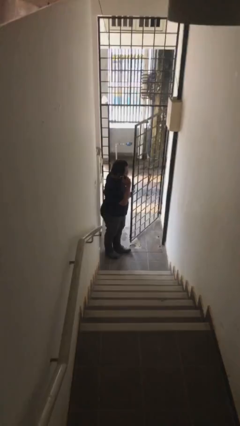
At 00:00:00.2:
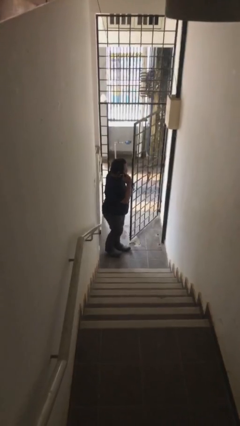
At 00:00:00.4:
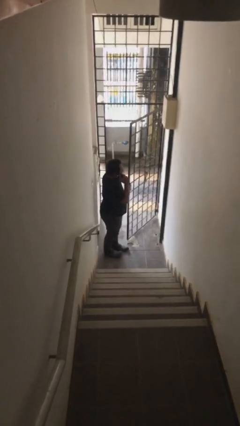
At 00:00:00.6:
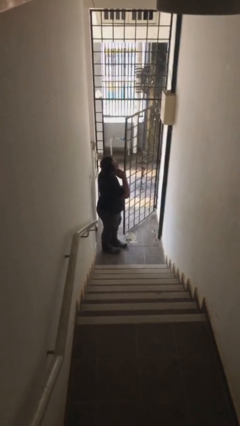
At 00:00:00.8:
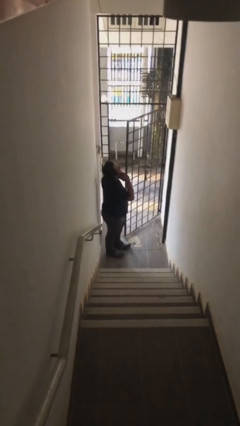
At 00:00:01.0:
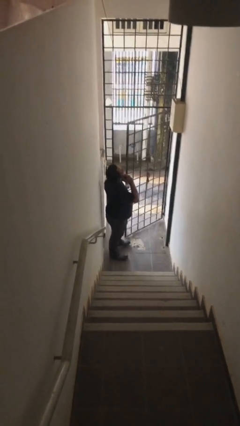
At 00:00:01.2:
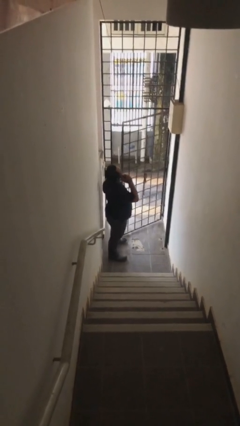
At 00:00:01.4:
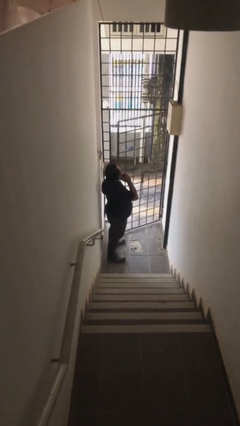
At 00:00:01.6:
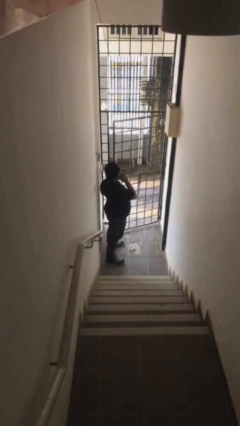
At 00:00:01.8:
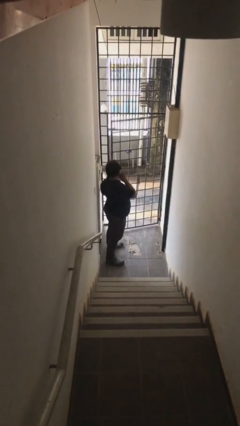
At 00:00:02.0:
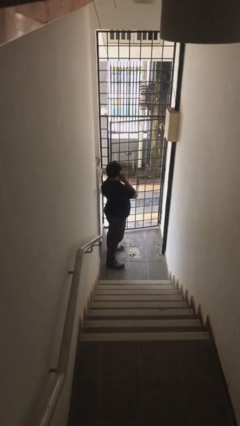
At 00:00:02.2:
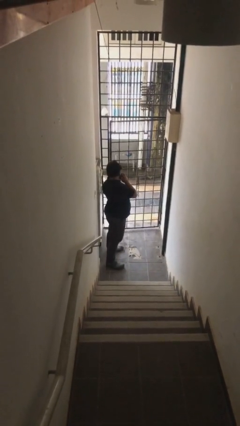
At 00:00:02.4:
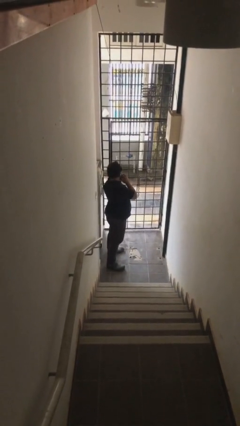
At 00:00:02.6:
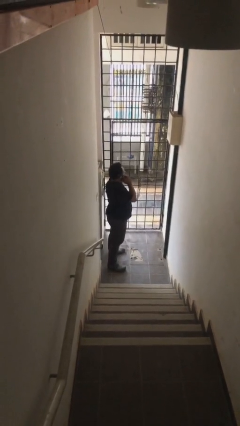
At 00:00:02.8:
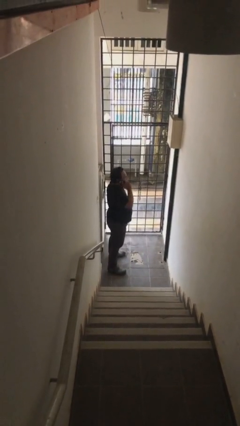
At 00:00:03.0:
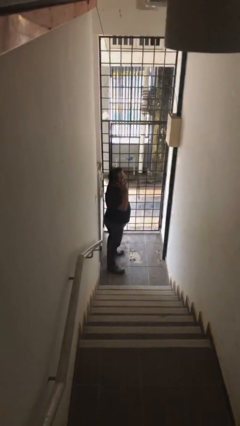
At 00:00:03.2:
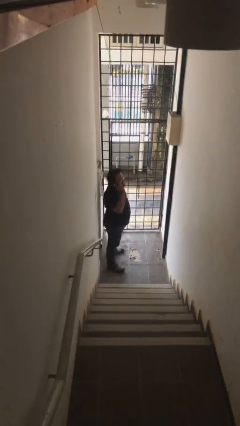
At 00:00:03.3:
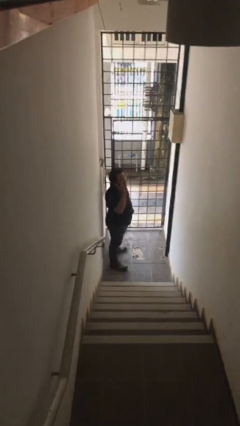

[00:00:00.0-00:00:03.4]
person closes facility door

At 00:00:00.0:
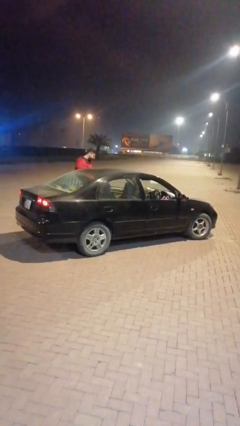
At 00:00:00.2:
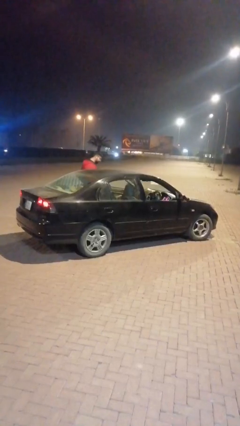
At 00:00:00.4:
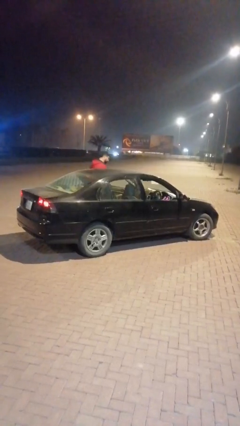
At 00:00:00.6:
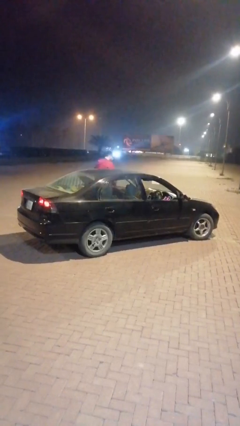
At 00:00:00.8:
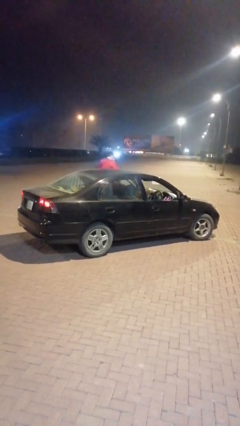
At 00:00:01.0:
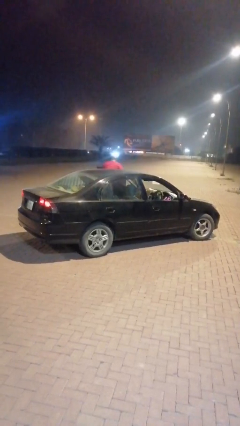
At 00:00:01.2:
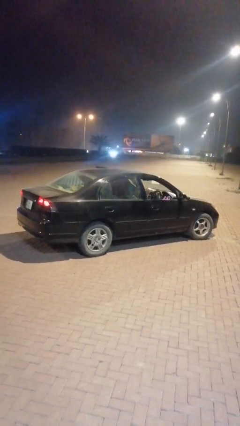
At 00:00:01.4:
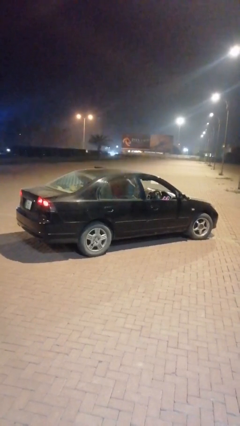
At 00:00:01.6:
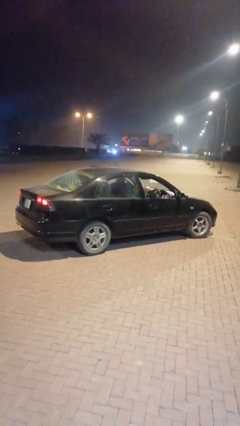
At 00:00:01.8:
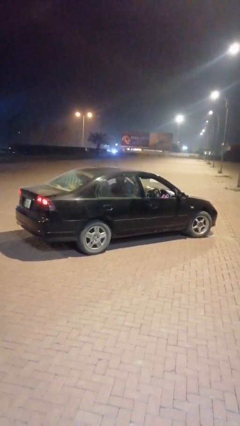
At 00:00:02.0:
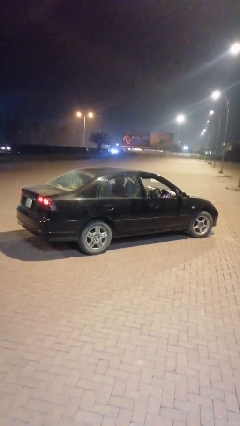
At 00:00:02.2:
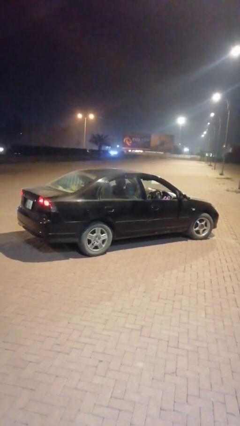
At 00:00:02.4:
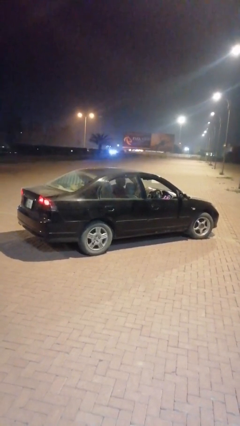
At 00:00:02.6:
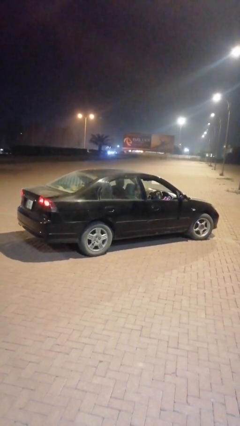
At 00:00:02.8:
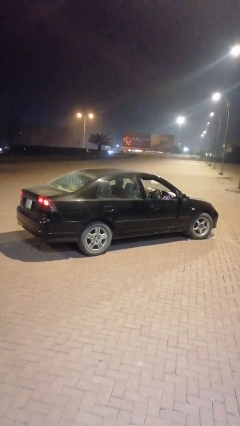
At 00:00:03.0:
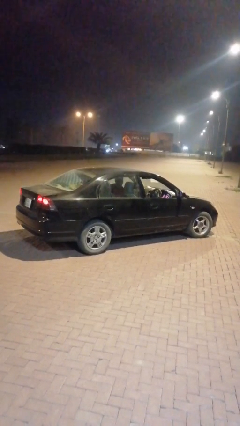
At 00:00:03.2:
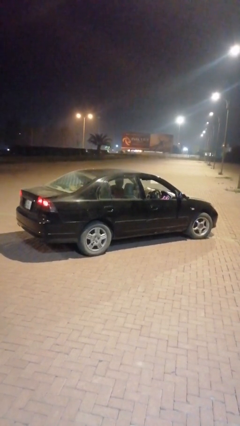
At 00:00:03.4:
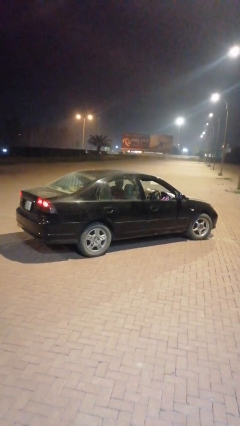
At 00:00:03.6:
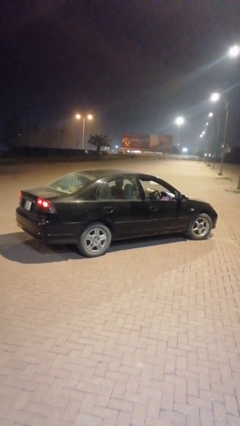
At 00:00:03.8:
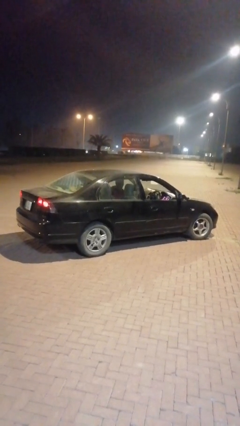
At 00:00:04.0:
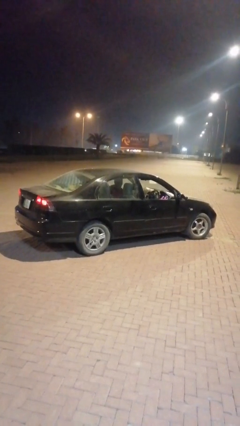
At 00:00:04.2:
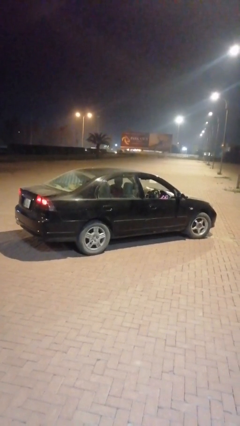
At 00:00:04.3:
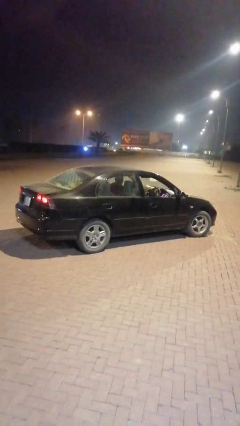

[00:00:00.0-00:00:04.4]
car picks up person

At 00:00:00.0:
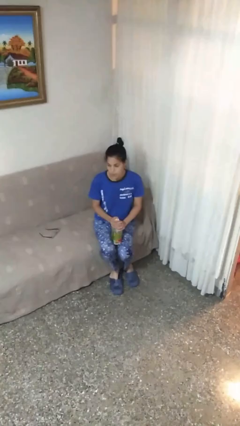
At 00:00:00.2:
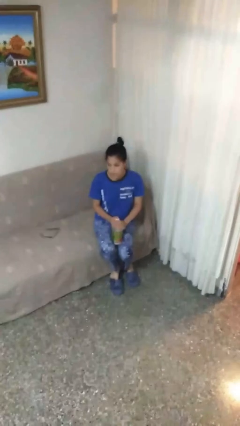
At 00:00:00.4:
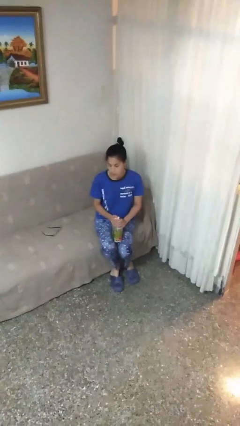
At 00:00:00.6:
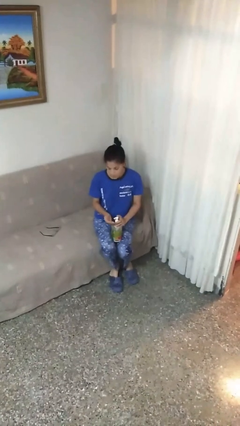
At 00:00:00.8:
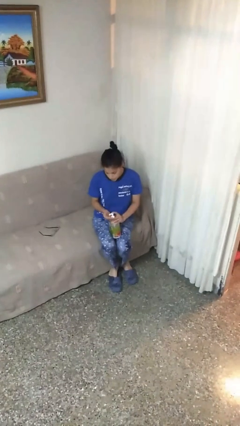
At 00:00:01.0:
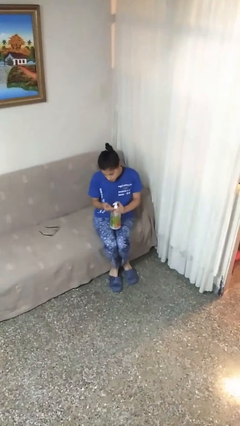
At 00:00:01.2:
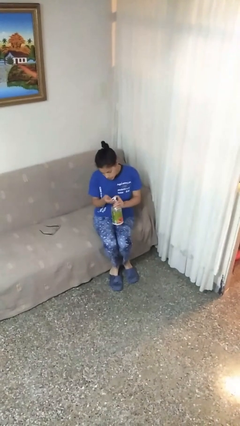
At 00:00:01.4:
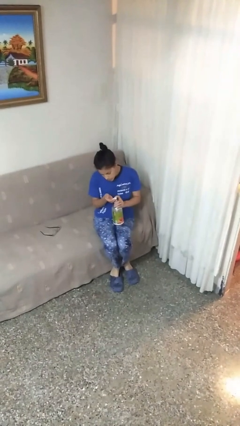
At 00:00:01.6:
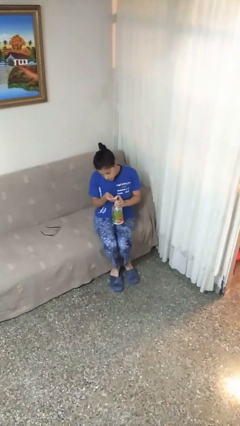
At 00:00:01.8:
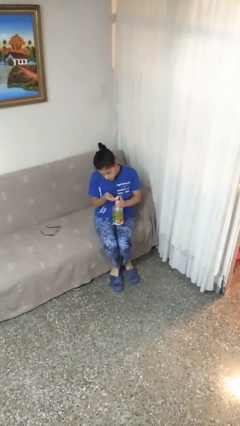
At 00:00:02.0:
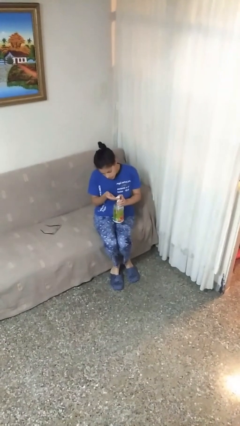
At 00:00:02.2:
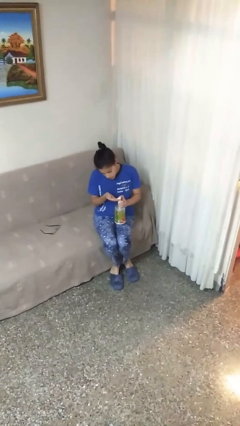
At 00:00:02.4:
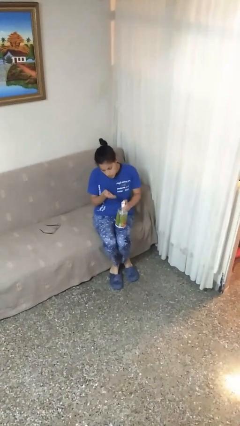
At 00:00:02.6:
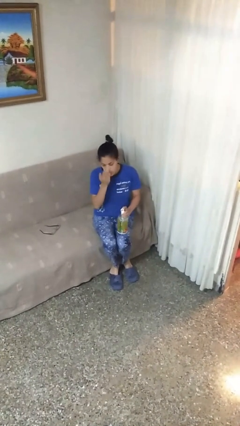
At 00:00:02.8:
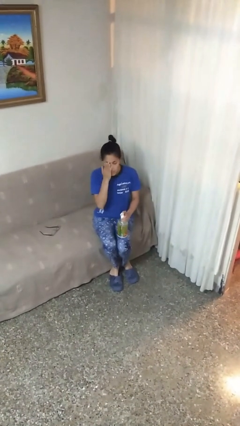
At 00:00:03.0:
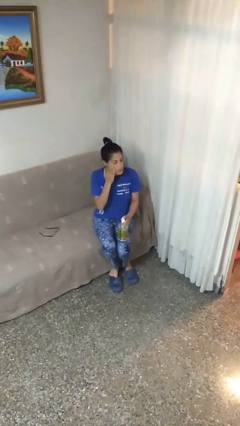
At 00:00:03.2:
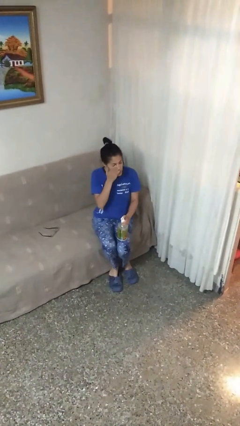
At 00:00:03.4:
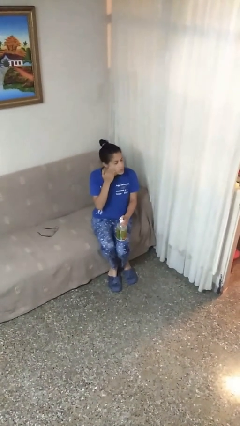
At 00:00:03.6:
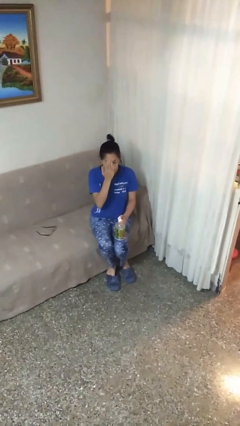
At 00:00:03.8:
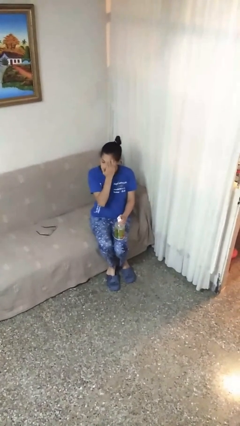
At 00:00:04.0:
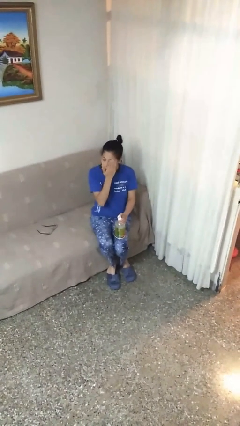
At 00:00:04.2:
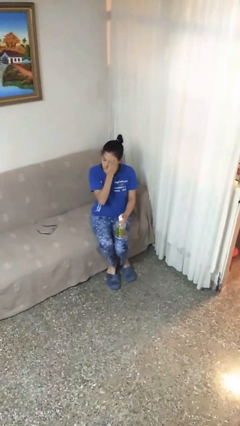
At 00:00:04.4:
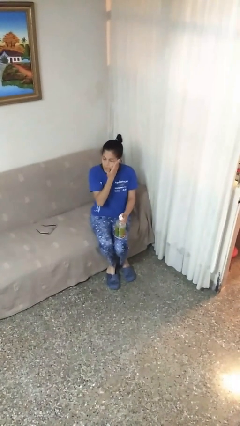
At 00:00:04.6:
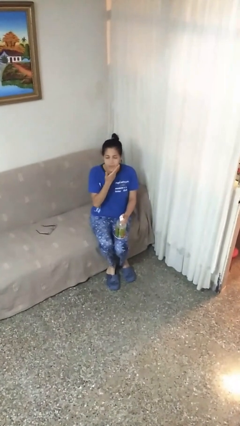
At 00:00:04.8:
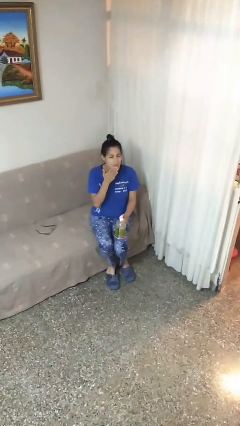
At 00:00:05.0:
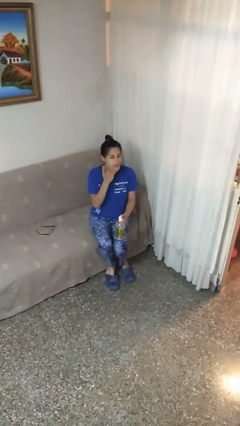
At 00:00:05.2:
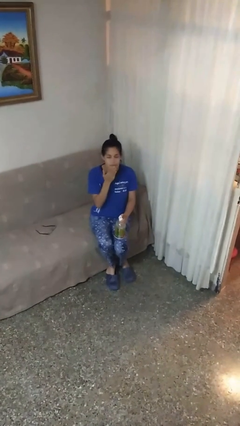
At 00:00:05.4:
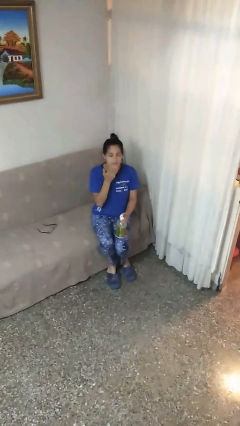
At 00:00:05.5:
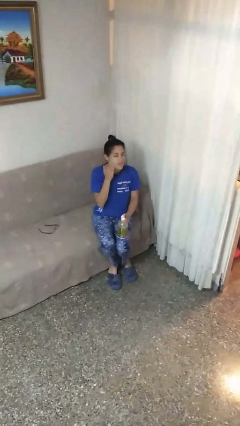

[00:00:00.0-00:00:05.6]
person applies facial moisturizer

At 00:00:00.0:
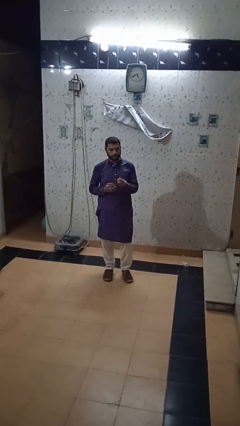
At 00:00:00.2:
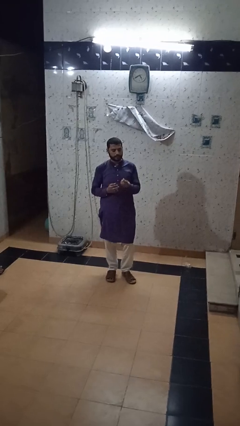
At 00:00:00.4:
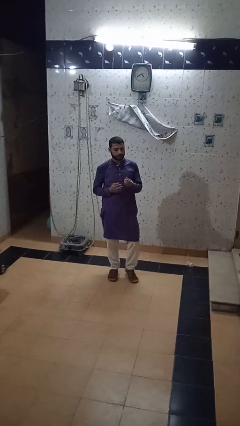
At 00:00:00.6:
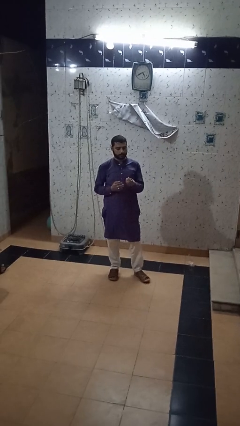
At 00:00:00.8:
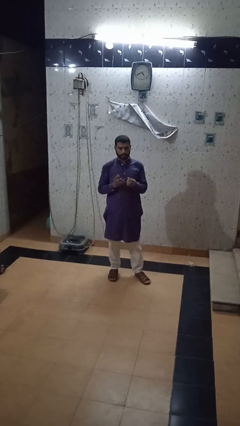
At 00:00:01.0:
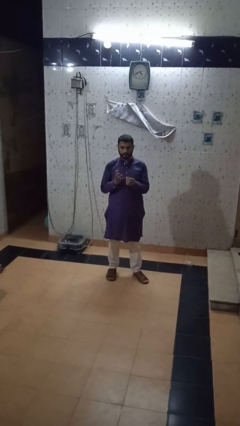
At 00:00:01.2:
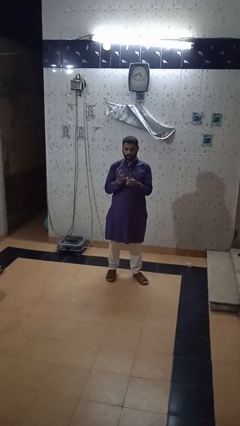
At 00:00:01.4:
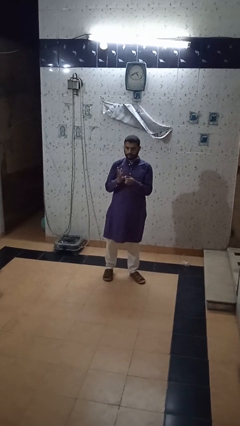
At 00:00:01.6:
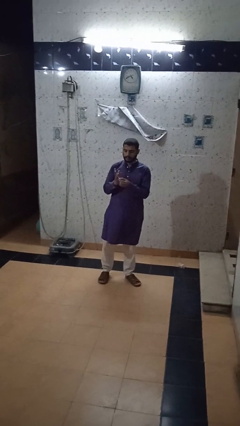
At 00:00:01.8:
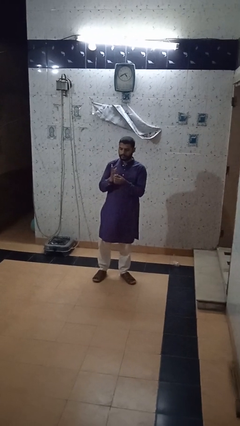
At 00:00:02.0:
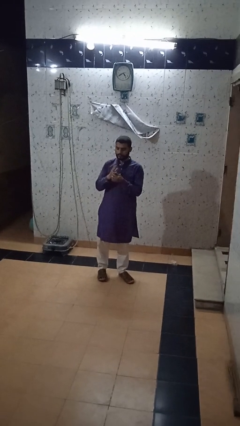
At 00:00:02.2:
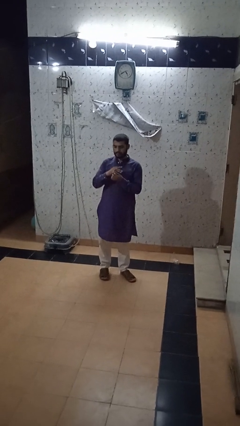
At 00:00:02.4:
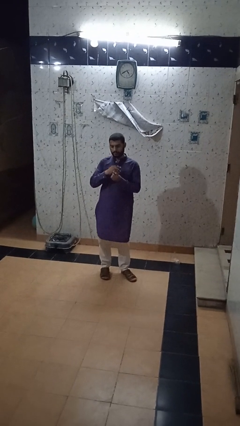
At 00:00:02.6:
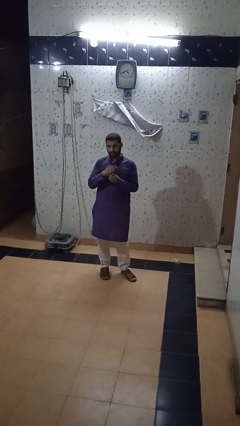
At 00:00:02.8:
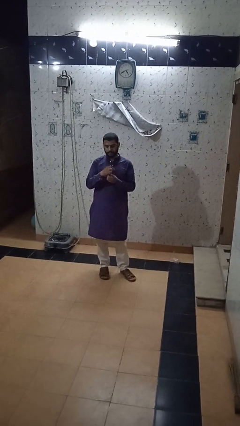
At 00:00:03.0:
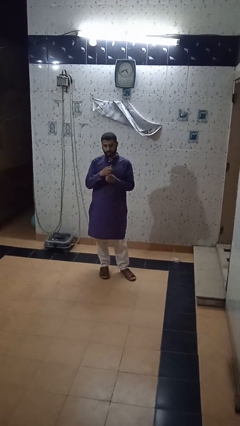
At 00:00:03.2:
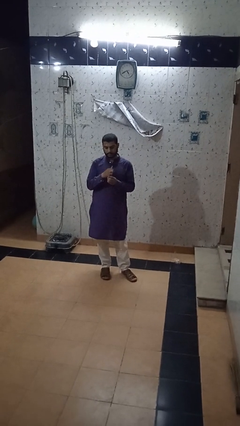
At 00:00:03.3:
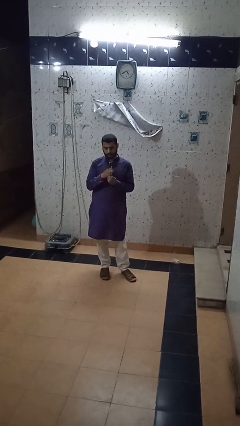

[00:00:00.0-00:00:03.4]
person puts on ring

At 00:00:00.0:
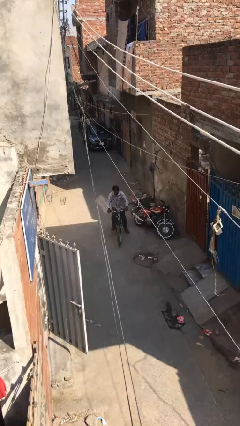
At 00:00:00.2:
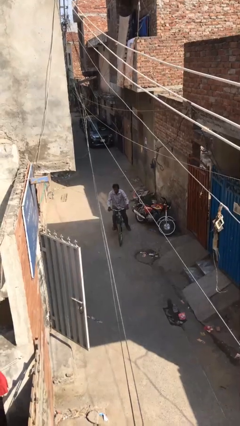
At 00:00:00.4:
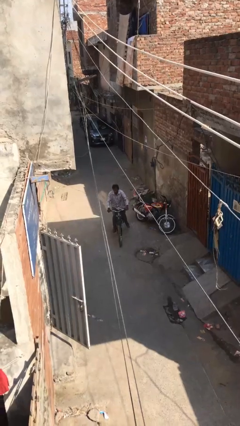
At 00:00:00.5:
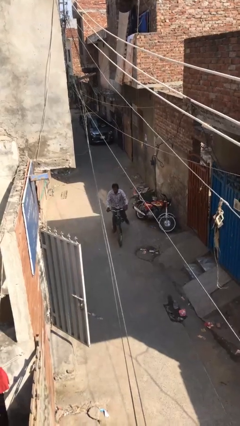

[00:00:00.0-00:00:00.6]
person rides bicycle
